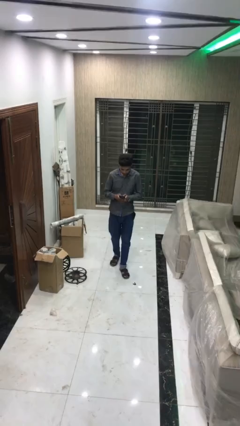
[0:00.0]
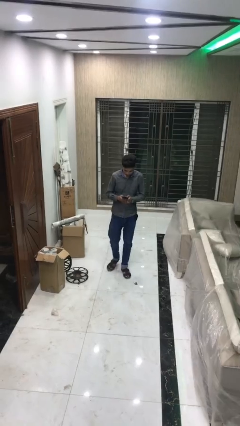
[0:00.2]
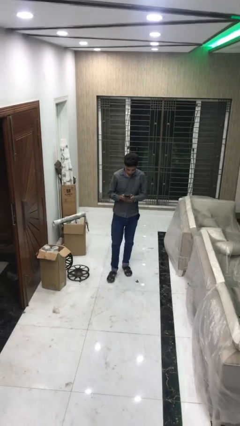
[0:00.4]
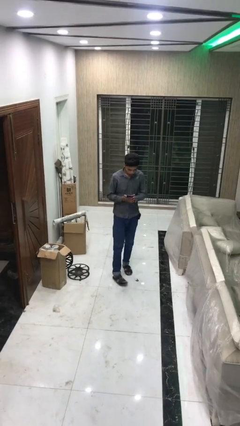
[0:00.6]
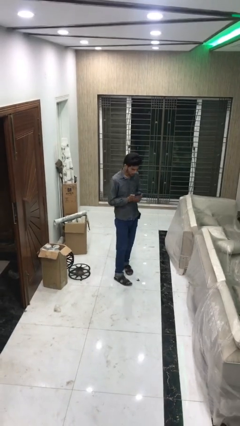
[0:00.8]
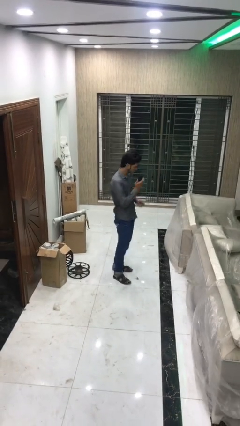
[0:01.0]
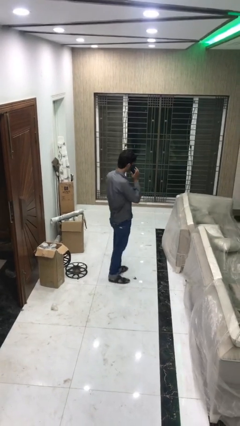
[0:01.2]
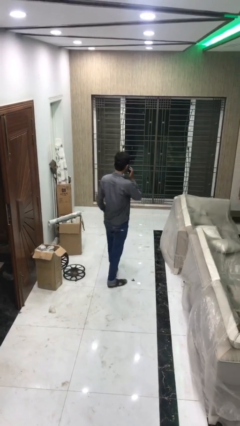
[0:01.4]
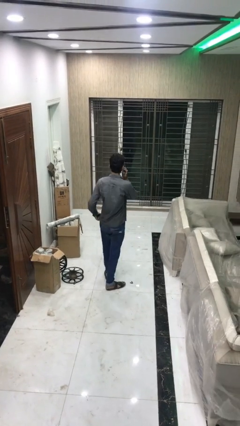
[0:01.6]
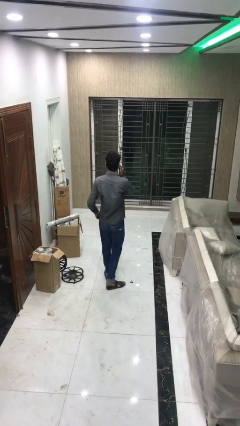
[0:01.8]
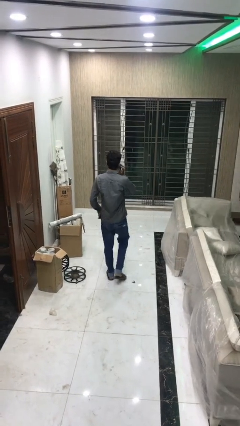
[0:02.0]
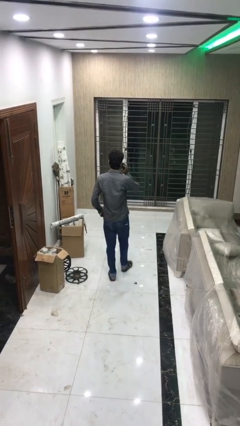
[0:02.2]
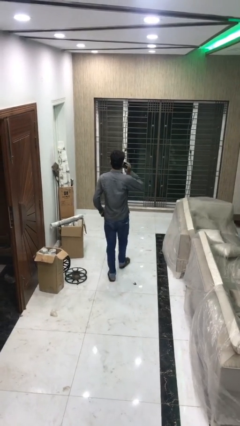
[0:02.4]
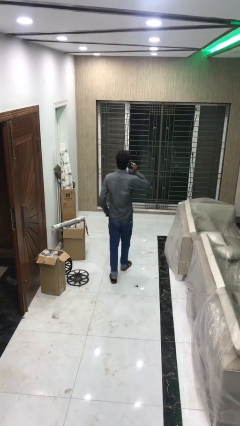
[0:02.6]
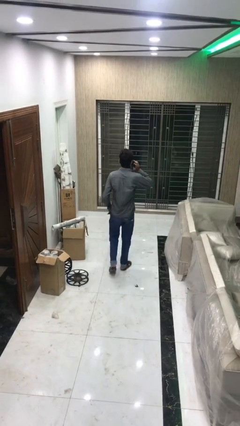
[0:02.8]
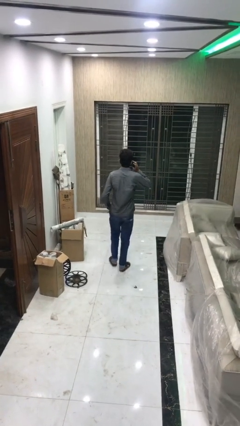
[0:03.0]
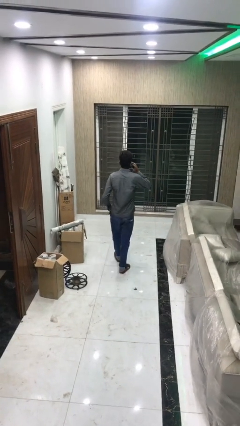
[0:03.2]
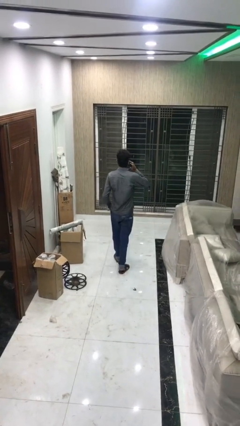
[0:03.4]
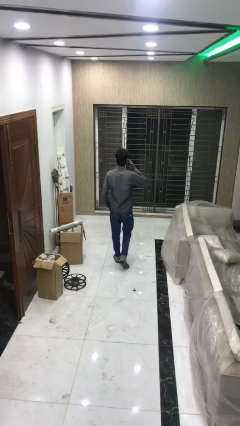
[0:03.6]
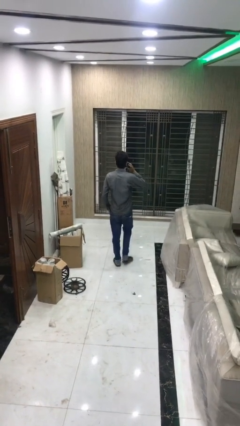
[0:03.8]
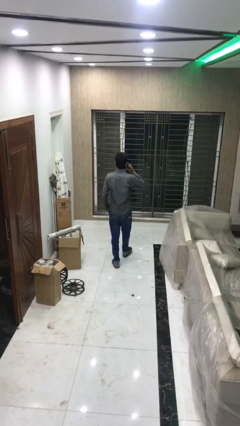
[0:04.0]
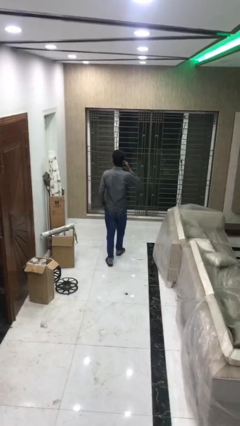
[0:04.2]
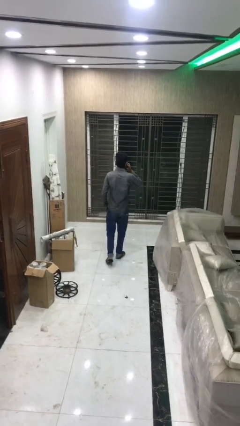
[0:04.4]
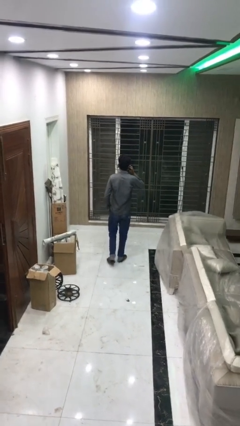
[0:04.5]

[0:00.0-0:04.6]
person talks on phone

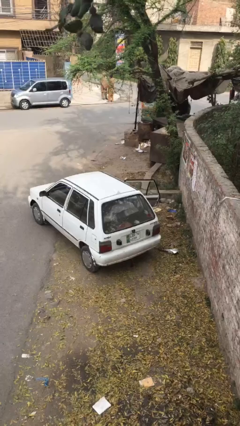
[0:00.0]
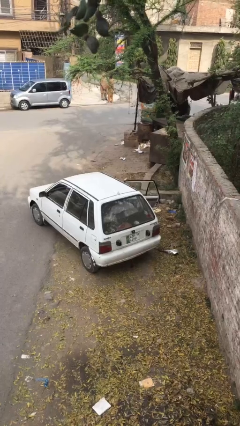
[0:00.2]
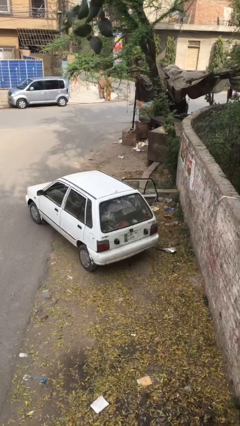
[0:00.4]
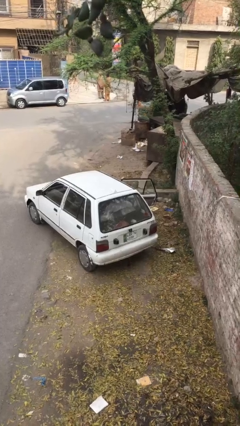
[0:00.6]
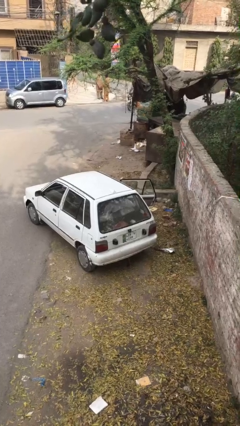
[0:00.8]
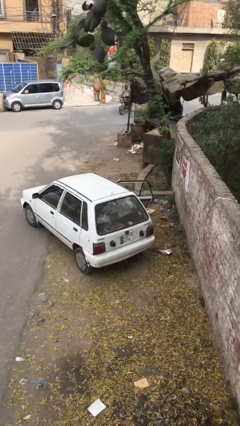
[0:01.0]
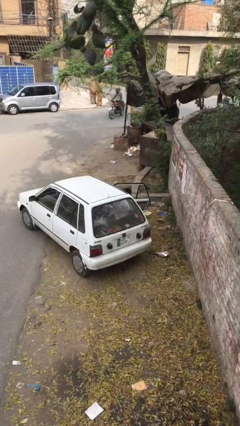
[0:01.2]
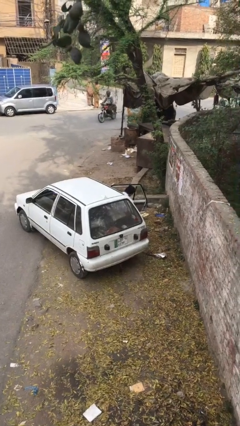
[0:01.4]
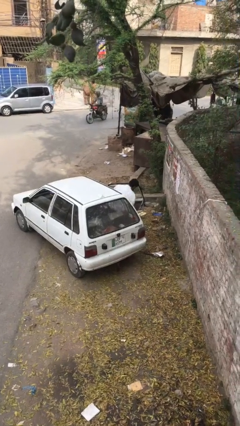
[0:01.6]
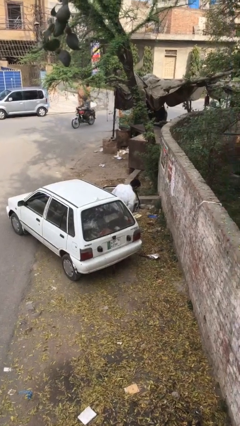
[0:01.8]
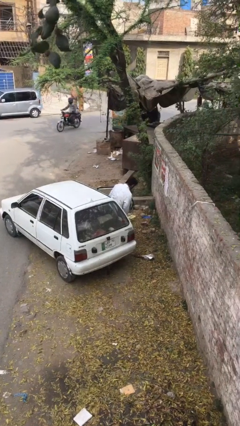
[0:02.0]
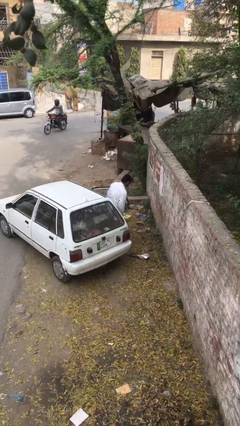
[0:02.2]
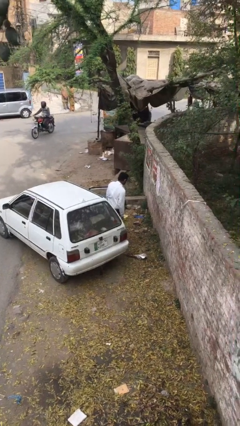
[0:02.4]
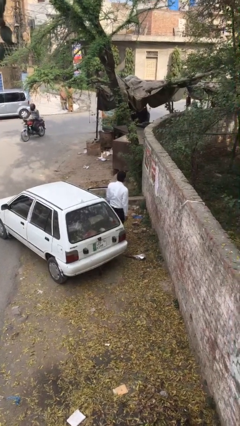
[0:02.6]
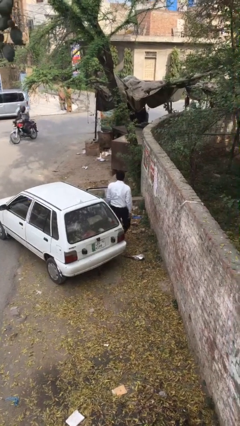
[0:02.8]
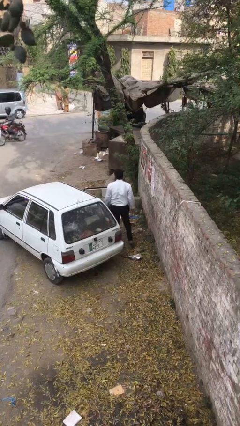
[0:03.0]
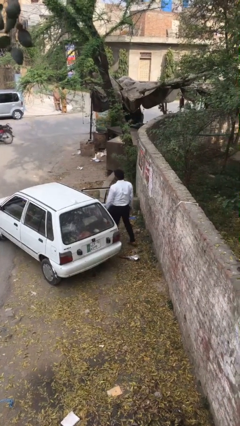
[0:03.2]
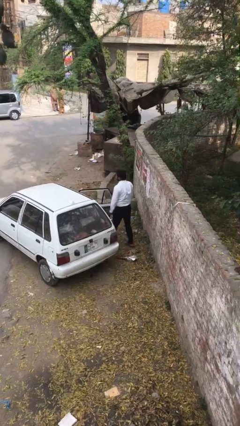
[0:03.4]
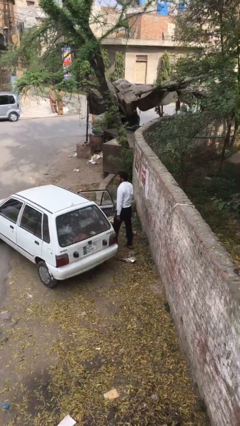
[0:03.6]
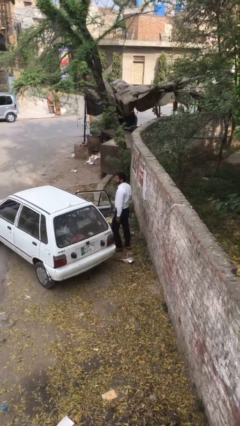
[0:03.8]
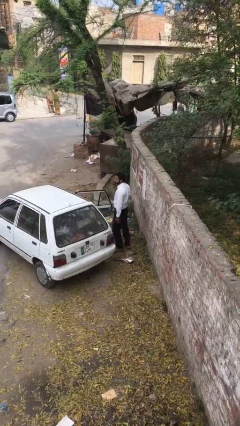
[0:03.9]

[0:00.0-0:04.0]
person exits car

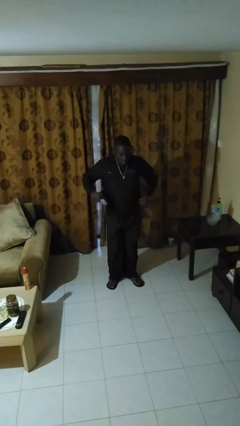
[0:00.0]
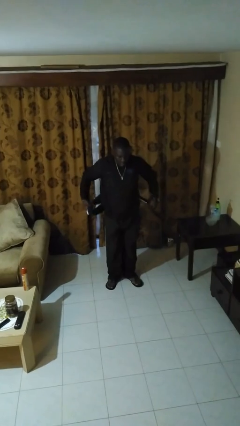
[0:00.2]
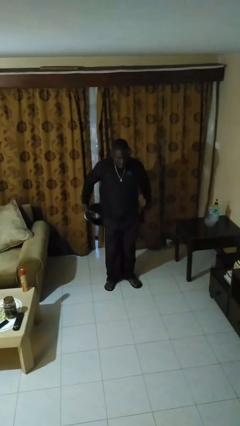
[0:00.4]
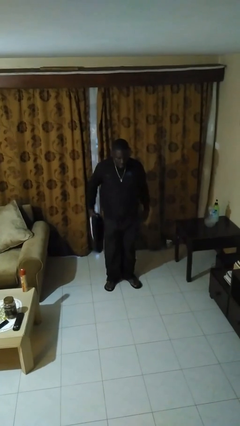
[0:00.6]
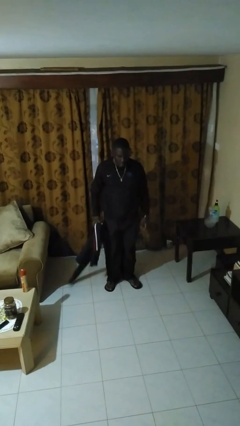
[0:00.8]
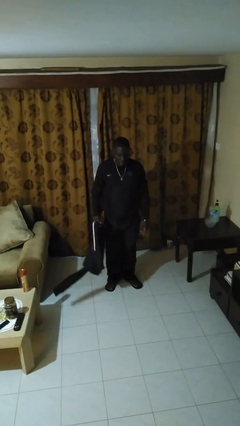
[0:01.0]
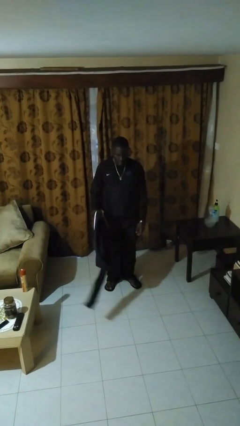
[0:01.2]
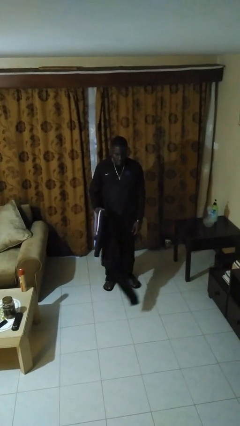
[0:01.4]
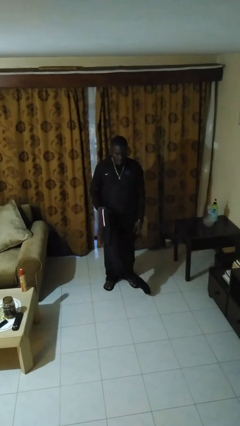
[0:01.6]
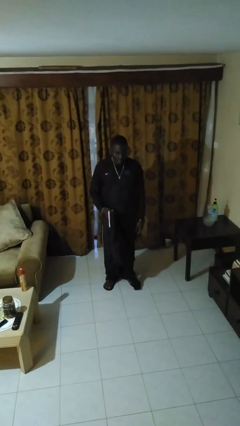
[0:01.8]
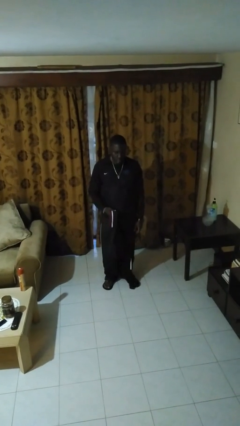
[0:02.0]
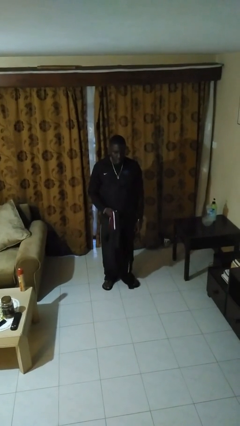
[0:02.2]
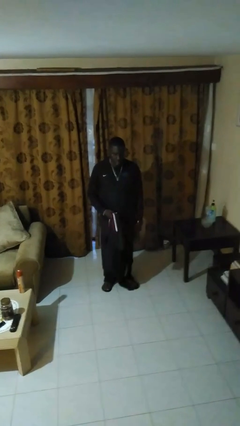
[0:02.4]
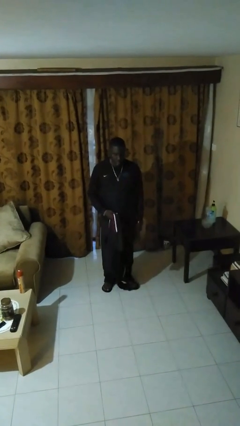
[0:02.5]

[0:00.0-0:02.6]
person unties jacket around waist

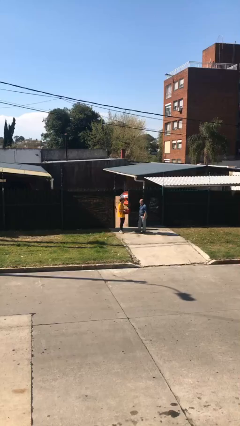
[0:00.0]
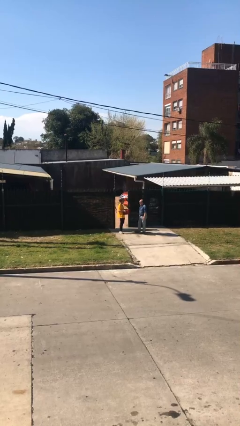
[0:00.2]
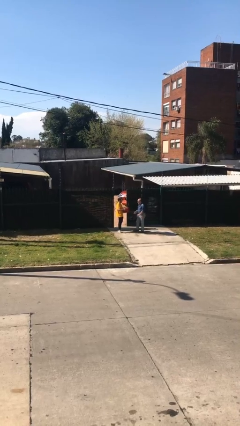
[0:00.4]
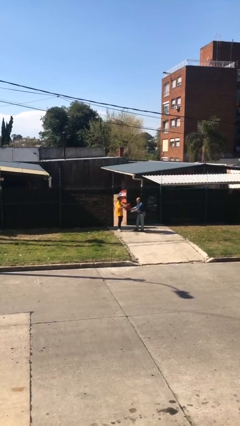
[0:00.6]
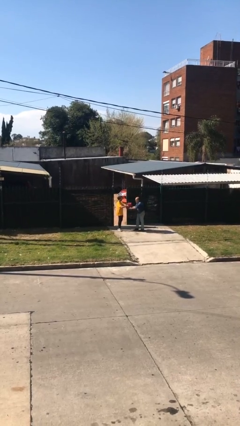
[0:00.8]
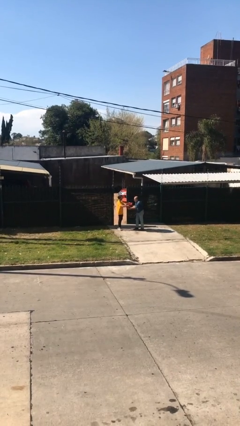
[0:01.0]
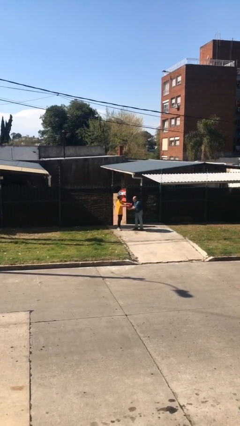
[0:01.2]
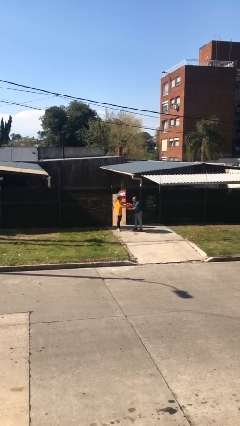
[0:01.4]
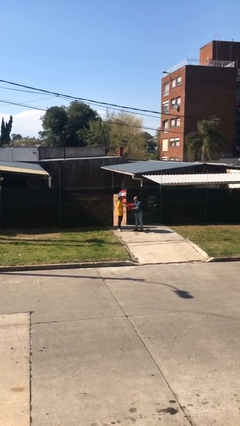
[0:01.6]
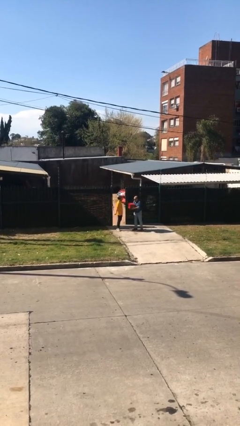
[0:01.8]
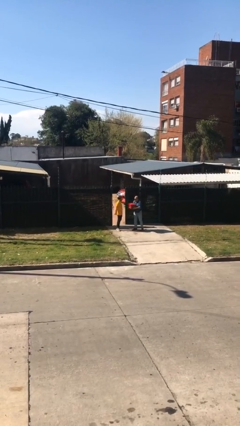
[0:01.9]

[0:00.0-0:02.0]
person transfers object to person

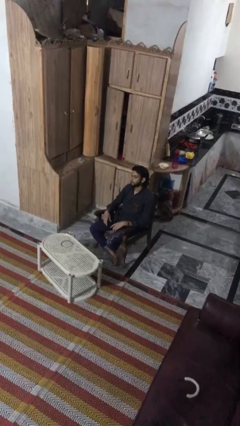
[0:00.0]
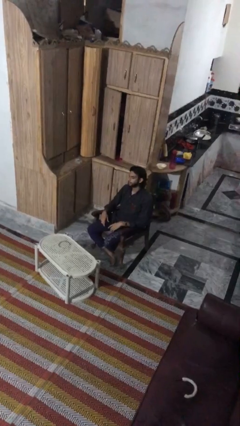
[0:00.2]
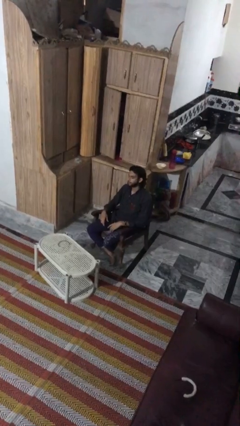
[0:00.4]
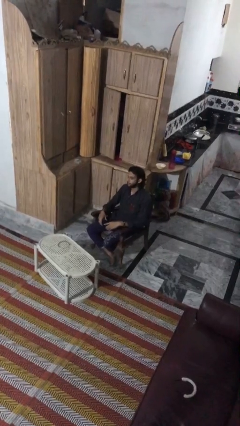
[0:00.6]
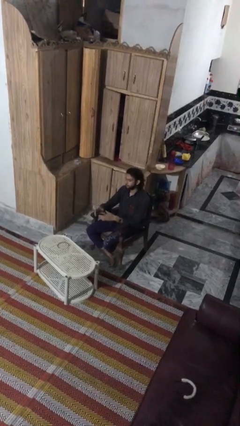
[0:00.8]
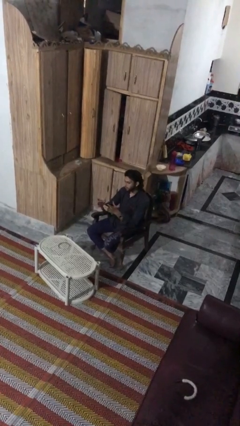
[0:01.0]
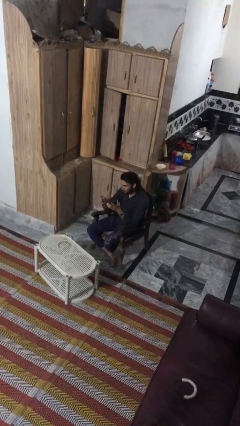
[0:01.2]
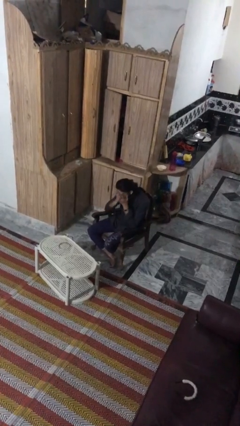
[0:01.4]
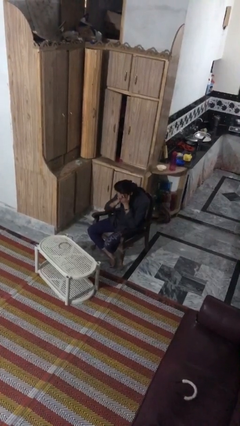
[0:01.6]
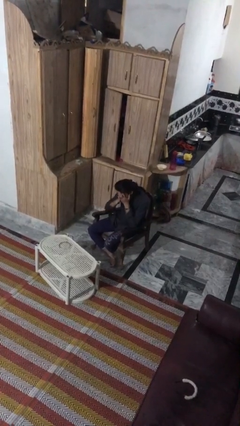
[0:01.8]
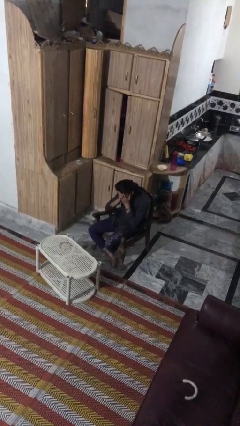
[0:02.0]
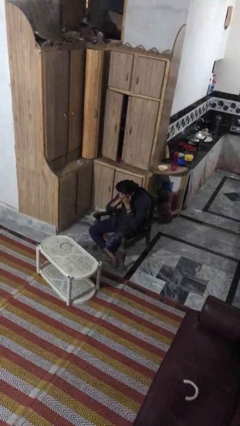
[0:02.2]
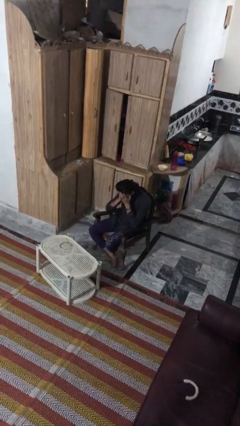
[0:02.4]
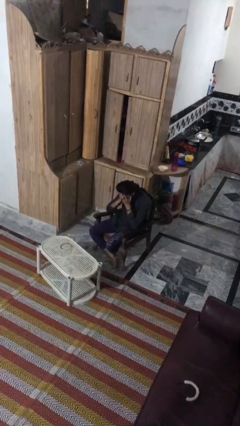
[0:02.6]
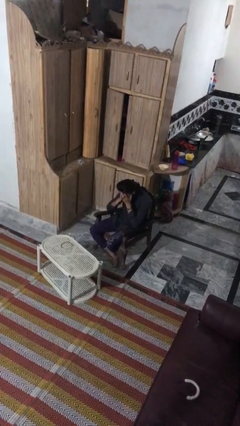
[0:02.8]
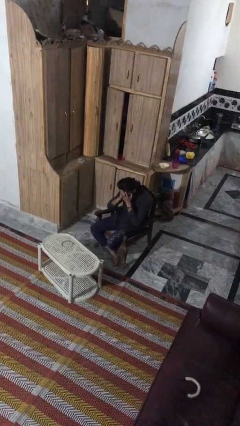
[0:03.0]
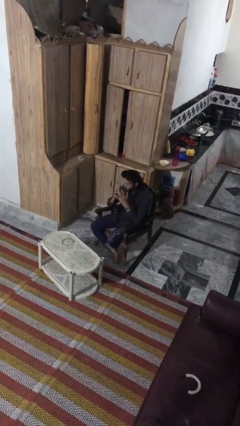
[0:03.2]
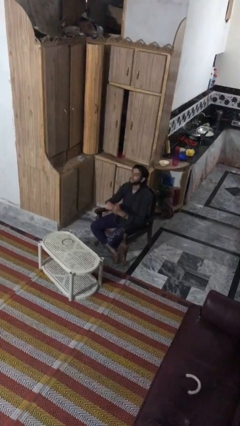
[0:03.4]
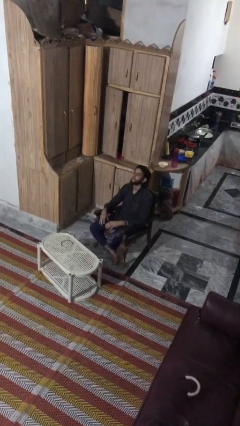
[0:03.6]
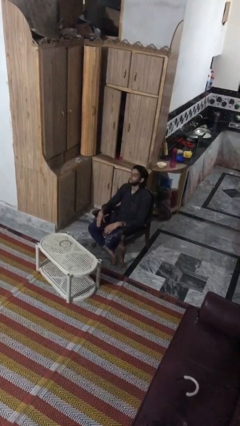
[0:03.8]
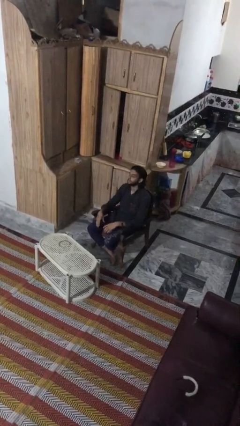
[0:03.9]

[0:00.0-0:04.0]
person covers face with hands
